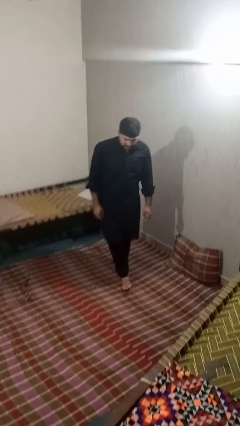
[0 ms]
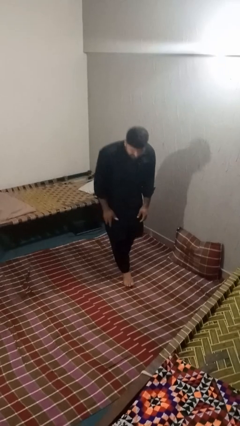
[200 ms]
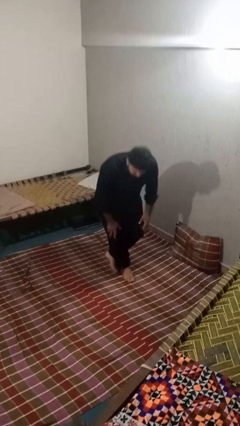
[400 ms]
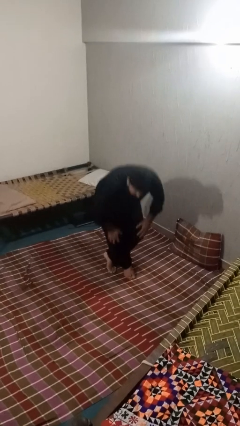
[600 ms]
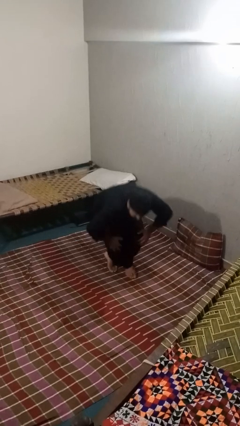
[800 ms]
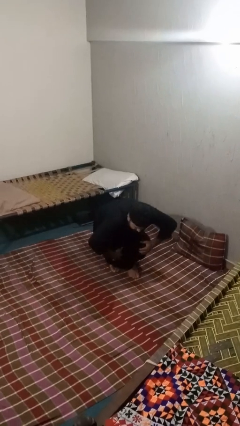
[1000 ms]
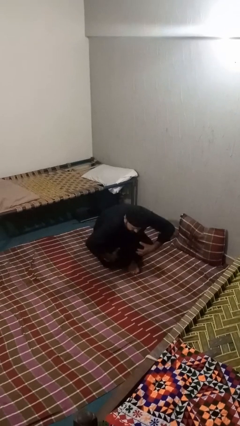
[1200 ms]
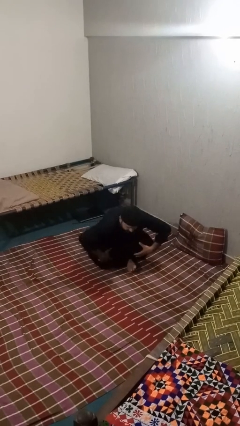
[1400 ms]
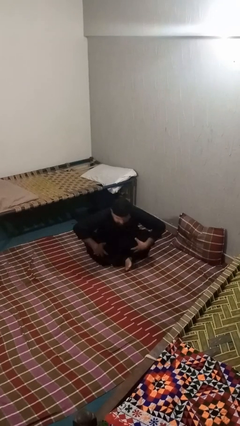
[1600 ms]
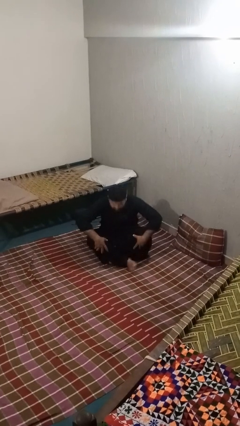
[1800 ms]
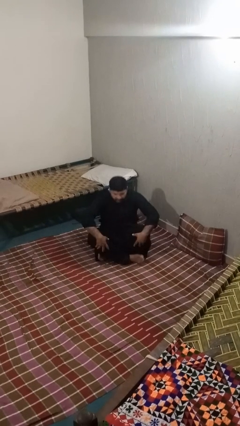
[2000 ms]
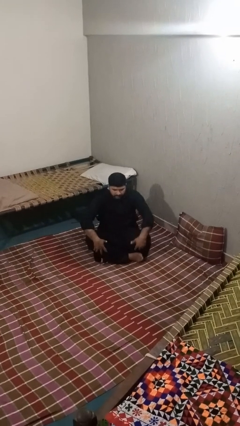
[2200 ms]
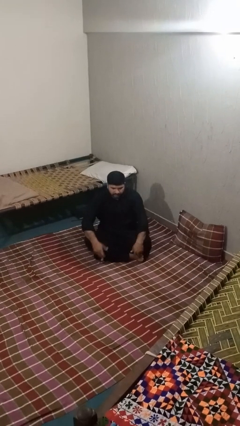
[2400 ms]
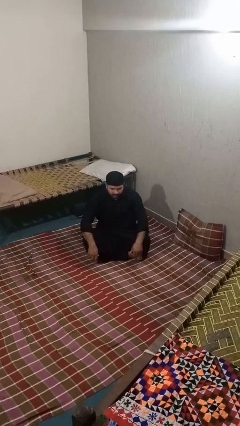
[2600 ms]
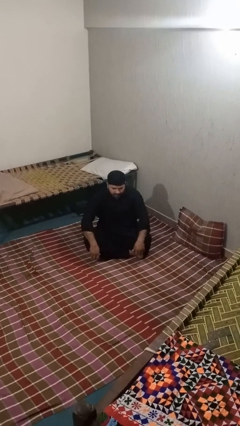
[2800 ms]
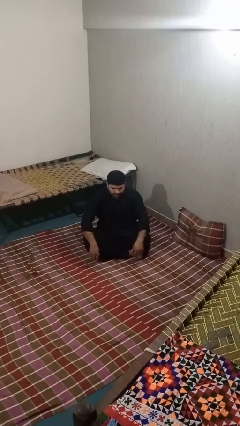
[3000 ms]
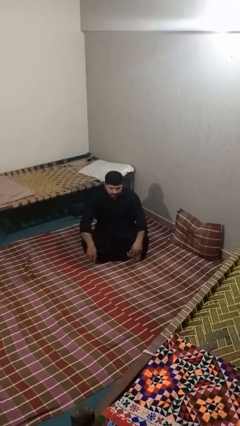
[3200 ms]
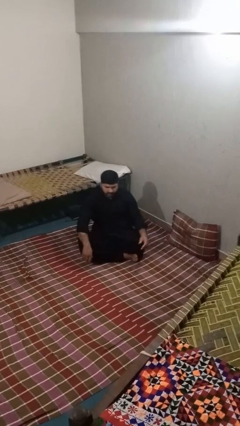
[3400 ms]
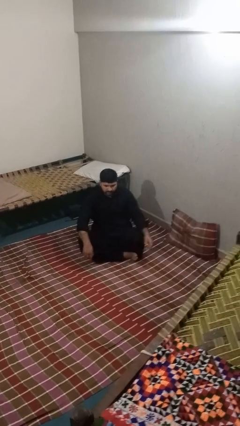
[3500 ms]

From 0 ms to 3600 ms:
person sits crisscross

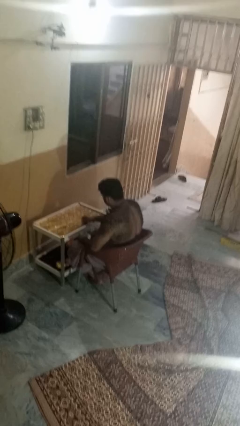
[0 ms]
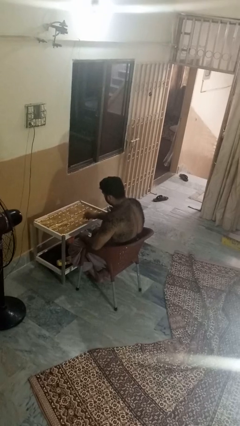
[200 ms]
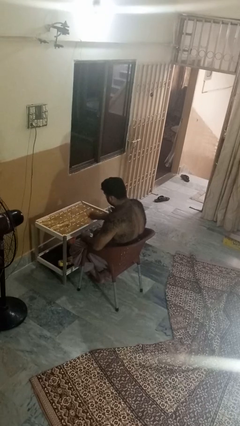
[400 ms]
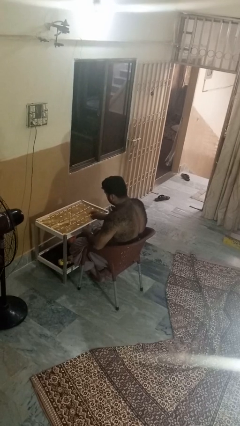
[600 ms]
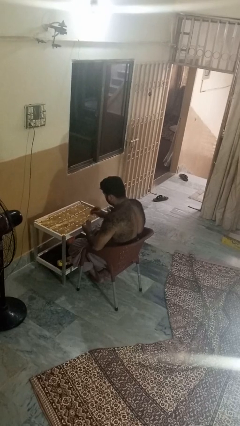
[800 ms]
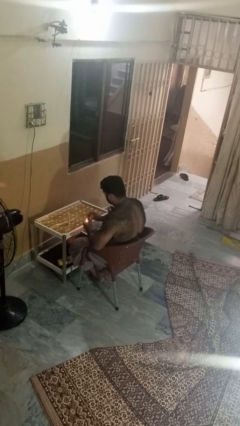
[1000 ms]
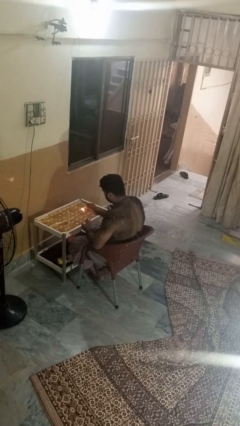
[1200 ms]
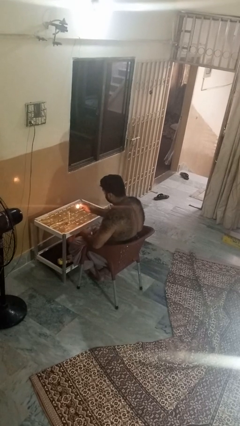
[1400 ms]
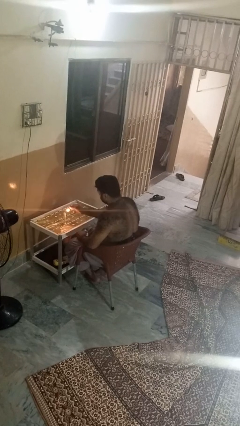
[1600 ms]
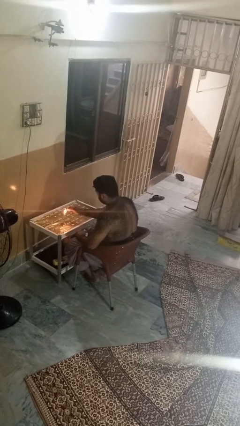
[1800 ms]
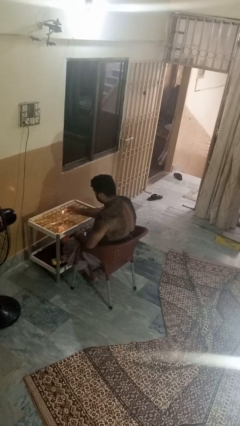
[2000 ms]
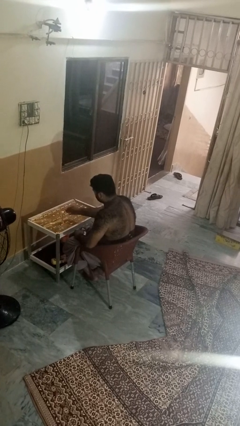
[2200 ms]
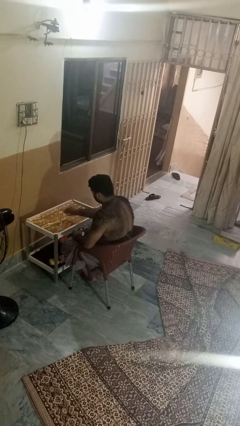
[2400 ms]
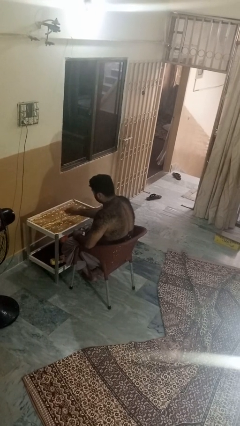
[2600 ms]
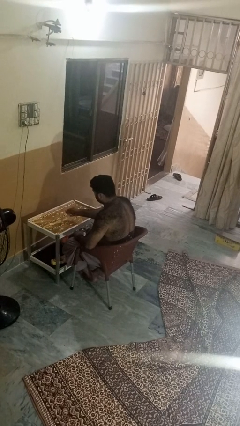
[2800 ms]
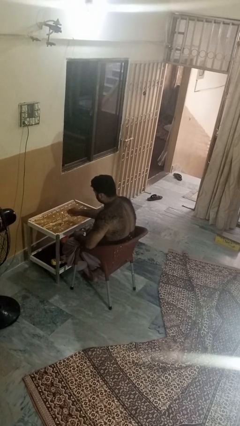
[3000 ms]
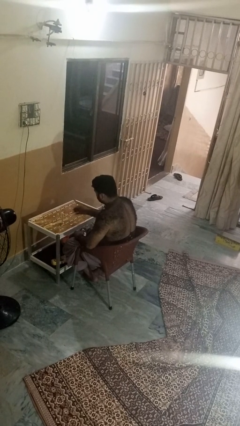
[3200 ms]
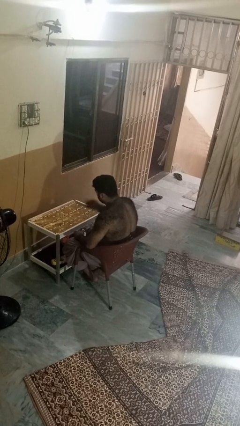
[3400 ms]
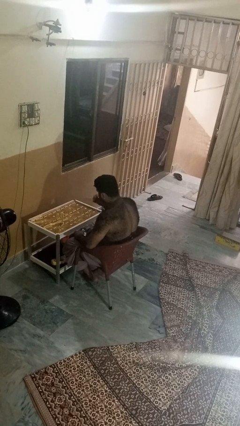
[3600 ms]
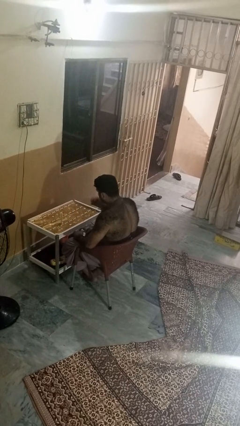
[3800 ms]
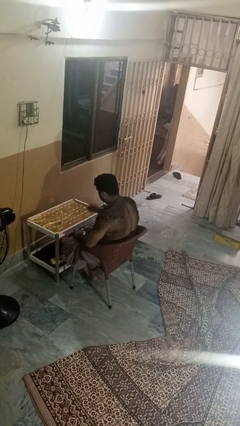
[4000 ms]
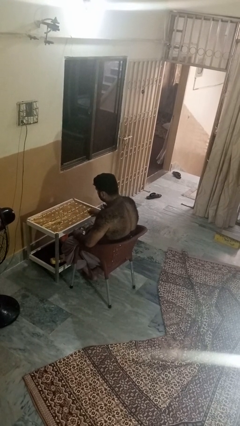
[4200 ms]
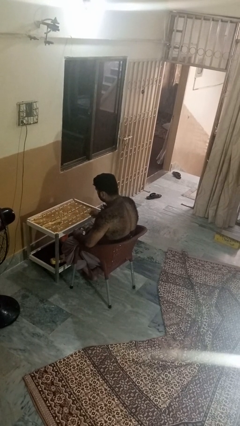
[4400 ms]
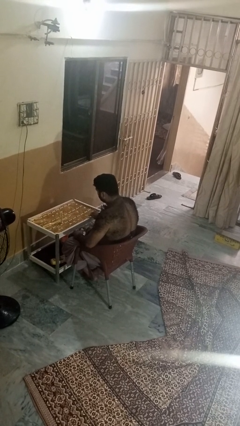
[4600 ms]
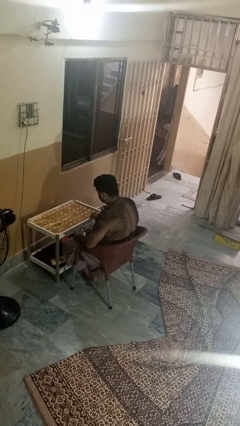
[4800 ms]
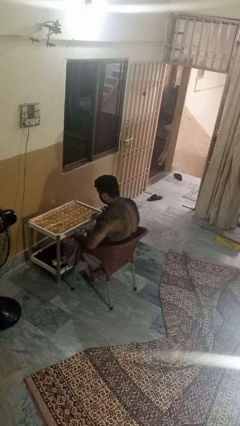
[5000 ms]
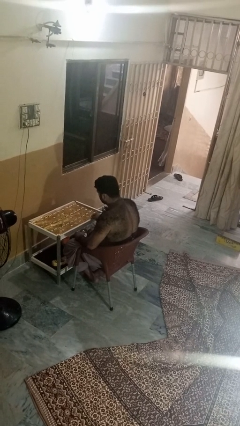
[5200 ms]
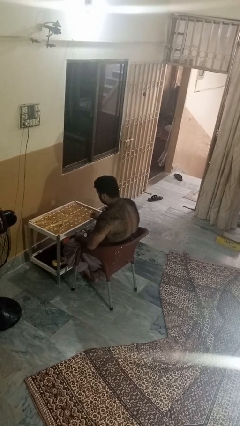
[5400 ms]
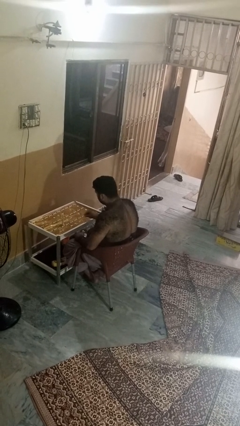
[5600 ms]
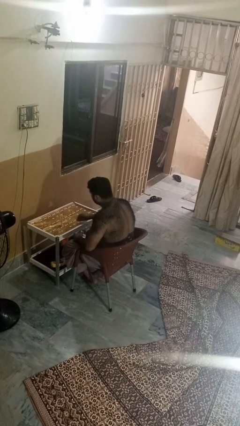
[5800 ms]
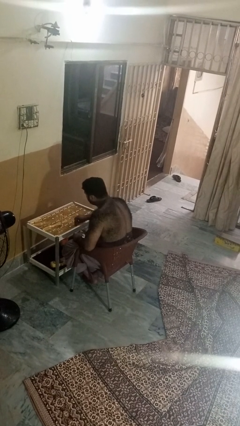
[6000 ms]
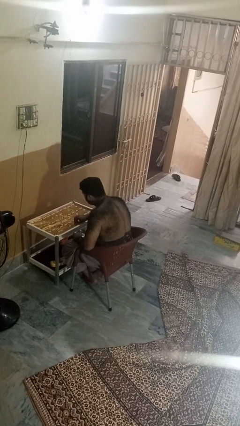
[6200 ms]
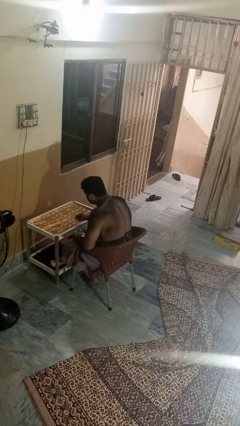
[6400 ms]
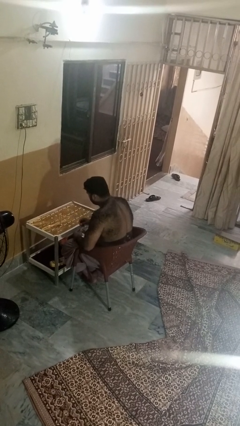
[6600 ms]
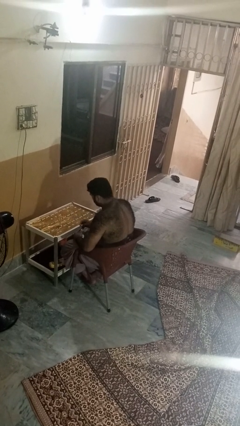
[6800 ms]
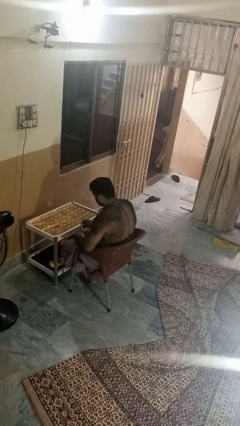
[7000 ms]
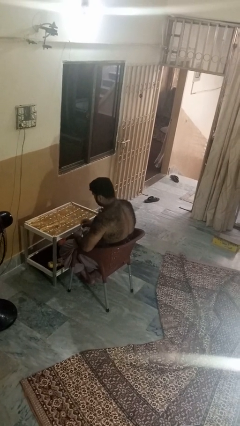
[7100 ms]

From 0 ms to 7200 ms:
person lights candle

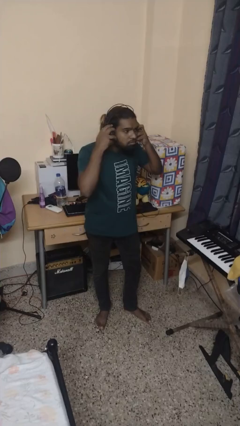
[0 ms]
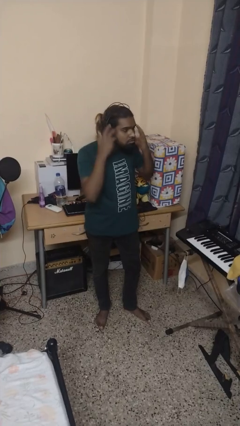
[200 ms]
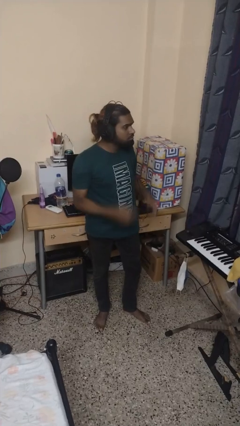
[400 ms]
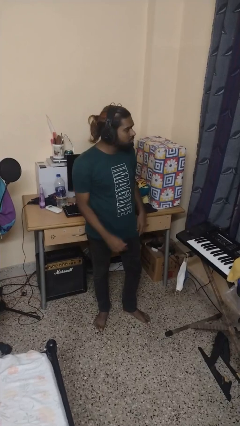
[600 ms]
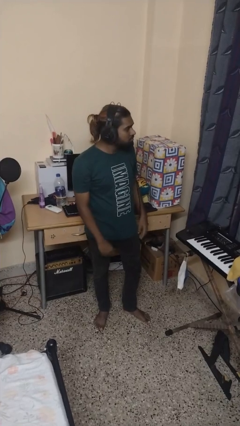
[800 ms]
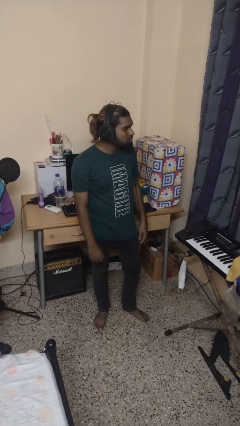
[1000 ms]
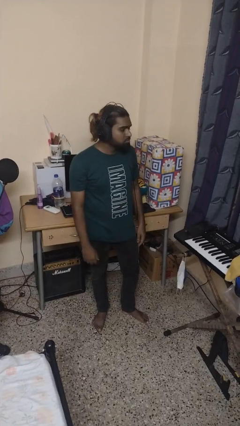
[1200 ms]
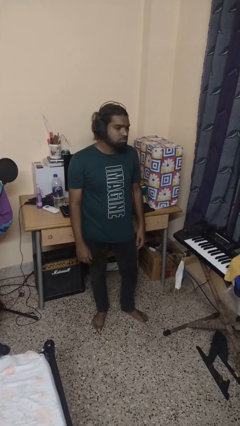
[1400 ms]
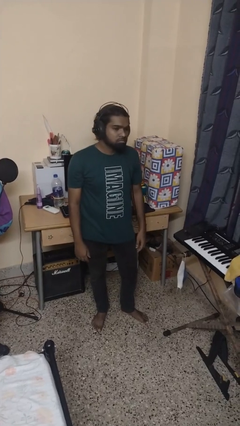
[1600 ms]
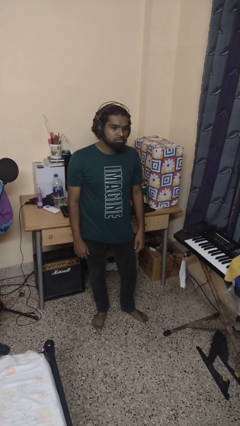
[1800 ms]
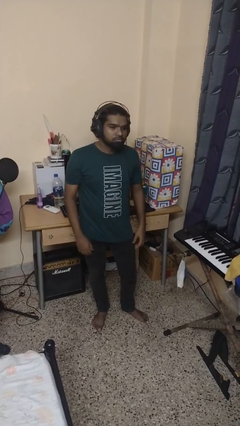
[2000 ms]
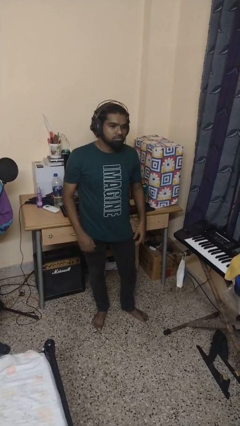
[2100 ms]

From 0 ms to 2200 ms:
person puts on headphones

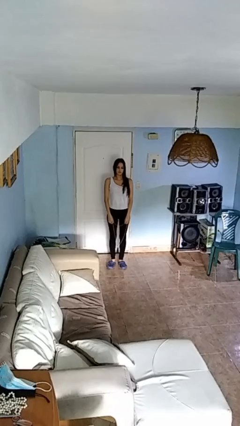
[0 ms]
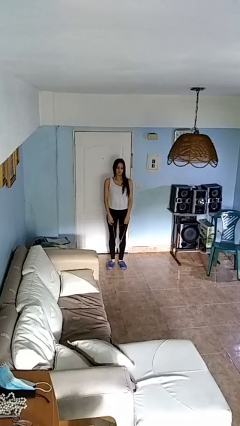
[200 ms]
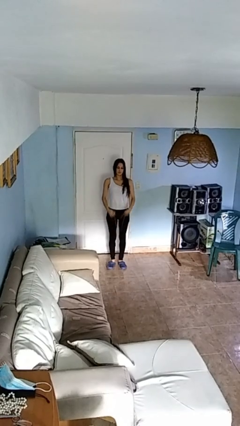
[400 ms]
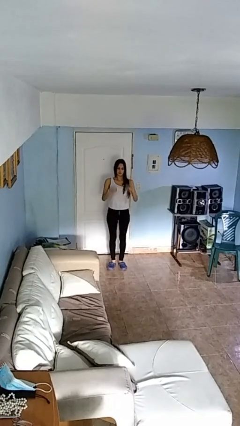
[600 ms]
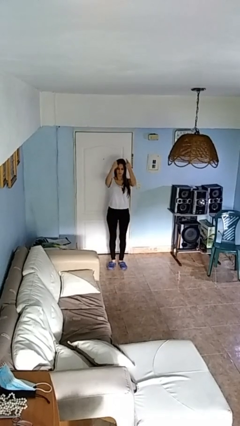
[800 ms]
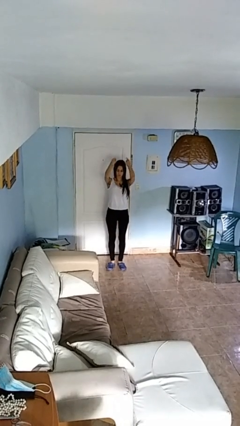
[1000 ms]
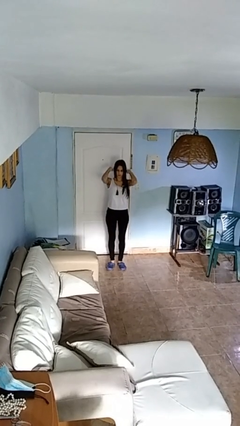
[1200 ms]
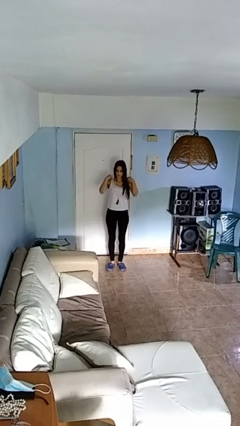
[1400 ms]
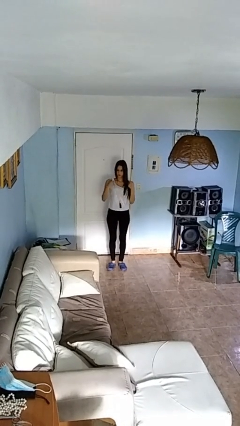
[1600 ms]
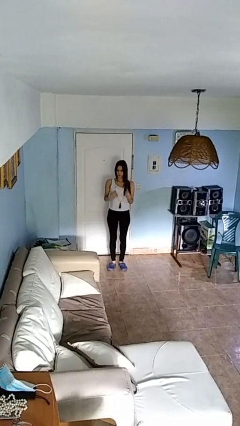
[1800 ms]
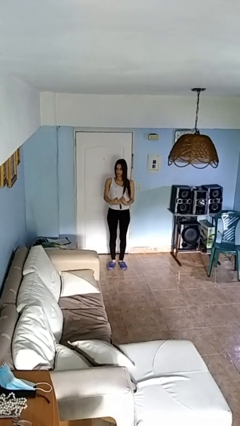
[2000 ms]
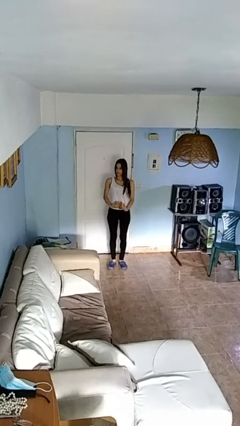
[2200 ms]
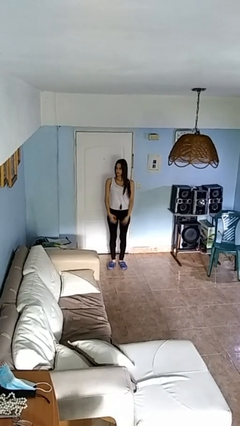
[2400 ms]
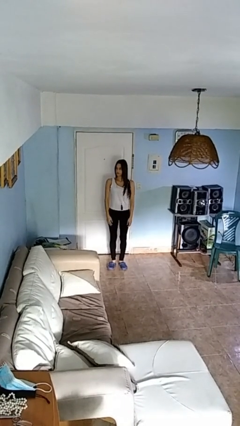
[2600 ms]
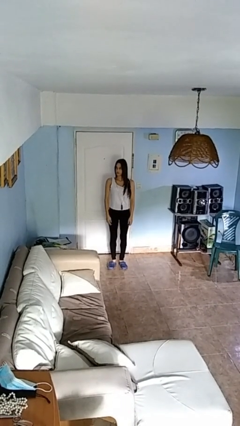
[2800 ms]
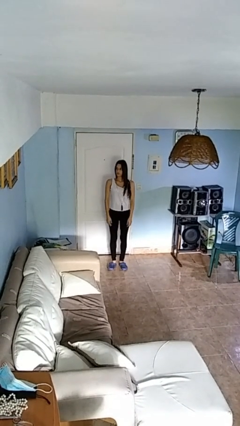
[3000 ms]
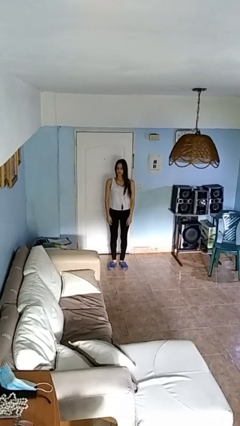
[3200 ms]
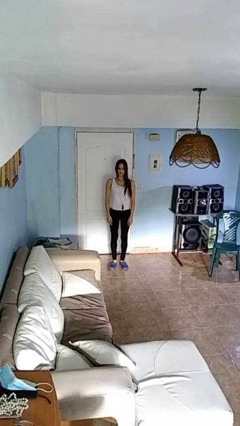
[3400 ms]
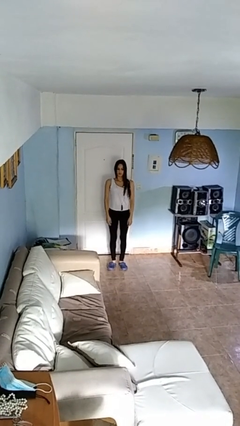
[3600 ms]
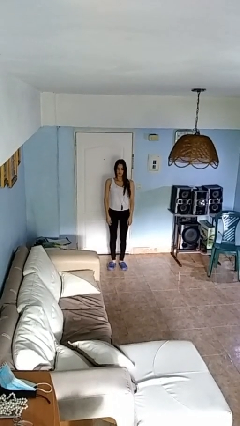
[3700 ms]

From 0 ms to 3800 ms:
person puts on necklace

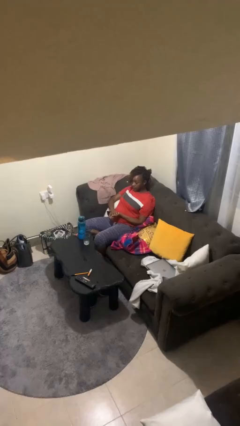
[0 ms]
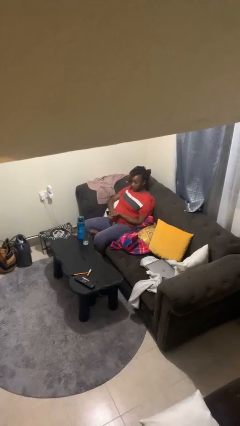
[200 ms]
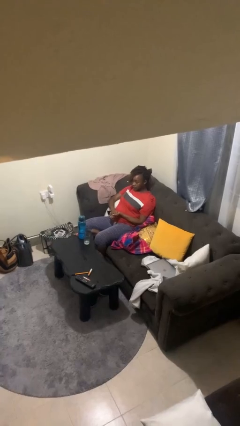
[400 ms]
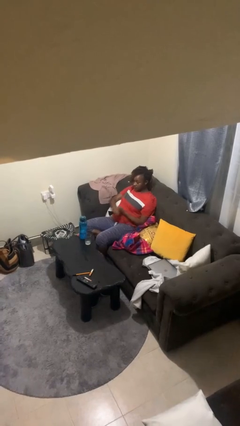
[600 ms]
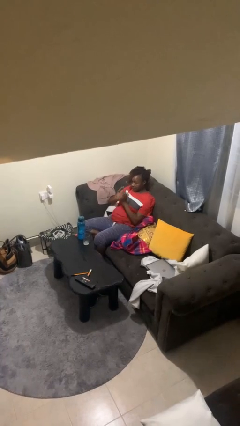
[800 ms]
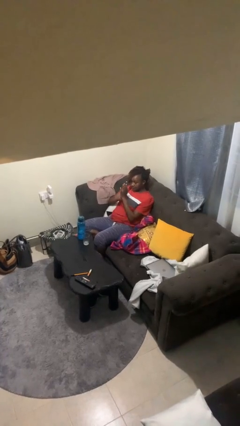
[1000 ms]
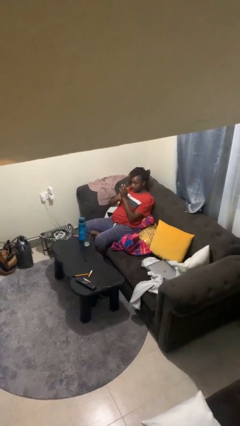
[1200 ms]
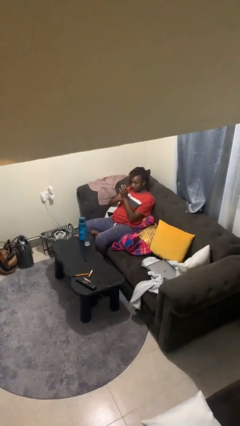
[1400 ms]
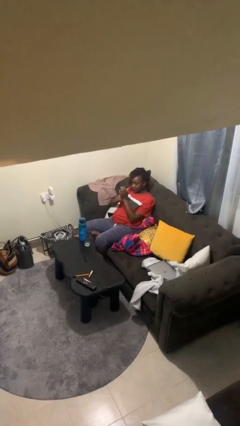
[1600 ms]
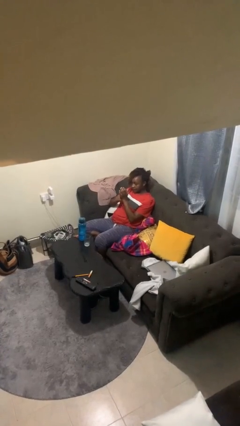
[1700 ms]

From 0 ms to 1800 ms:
person claps hands
